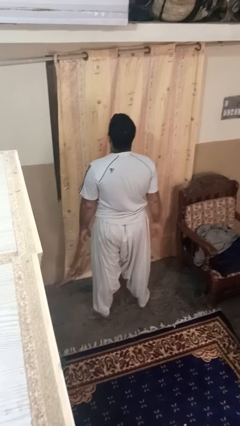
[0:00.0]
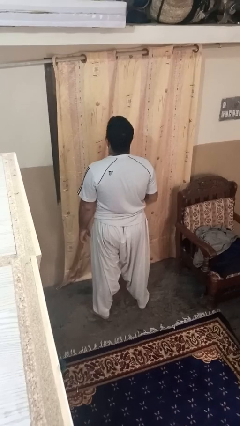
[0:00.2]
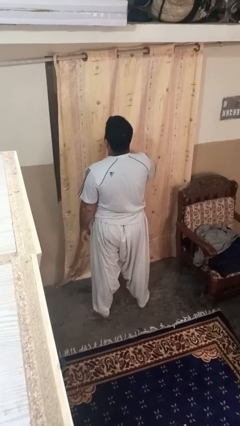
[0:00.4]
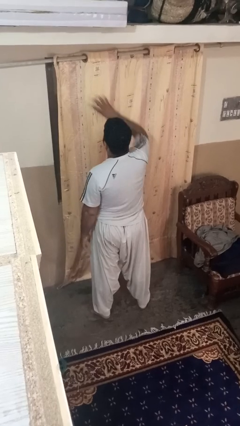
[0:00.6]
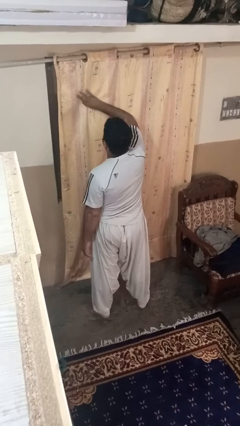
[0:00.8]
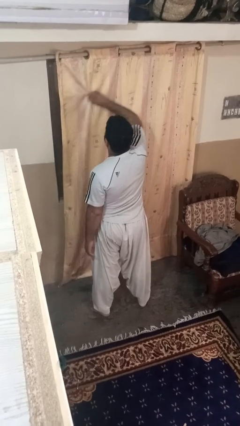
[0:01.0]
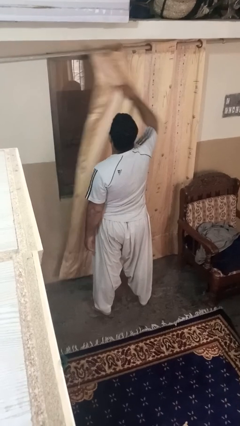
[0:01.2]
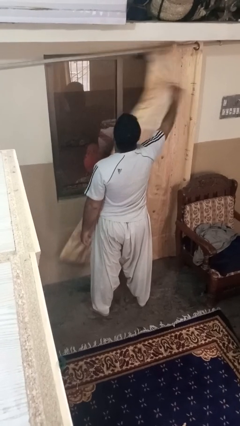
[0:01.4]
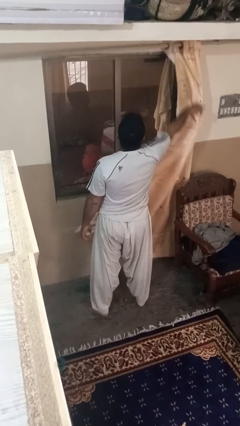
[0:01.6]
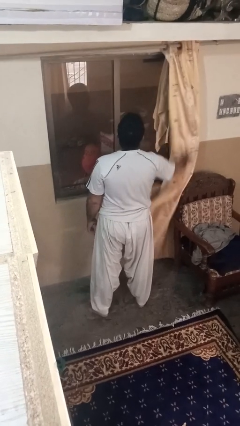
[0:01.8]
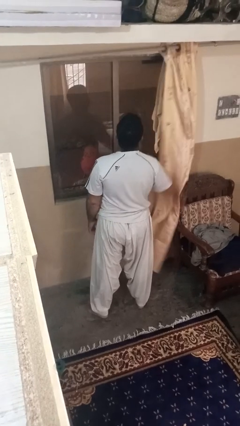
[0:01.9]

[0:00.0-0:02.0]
person opens curtains

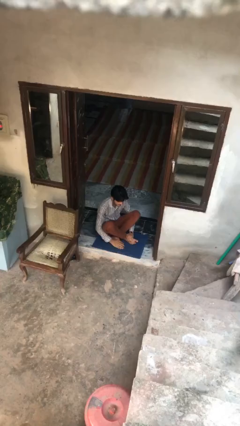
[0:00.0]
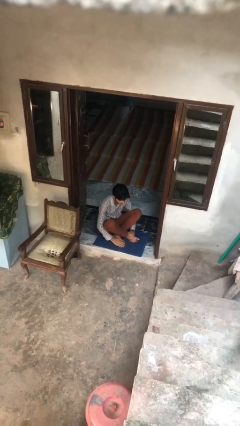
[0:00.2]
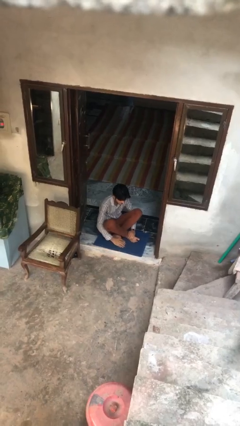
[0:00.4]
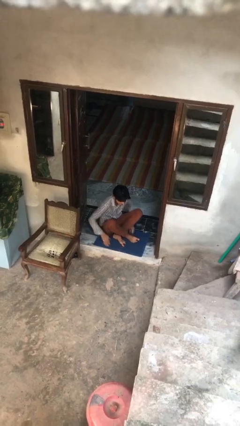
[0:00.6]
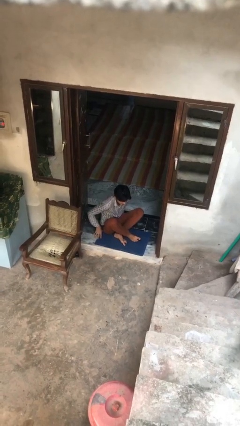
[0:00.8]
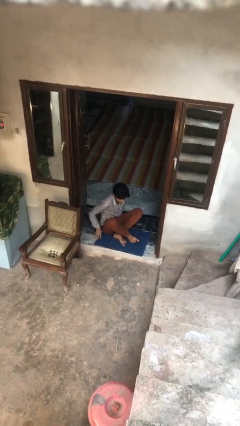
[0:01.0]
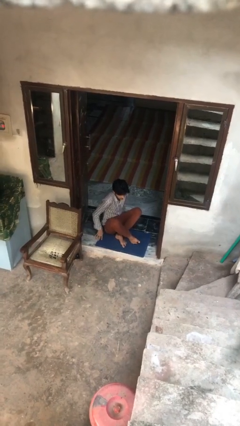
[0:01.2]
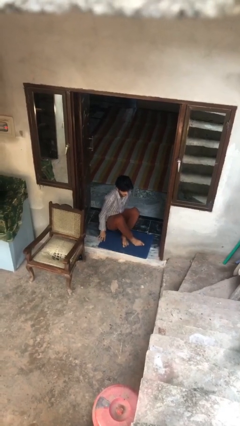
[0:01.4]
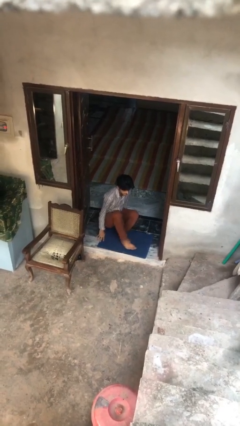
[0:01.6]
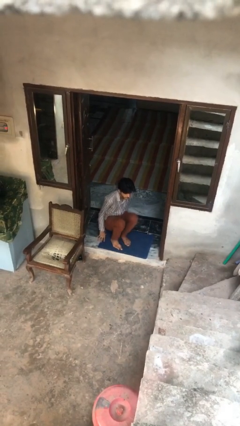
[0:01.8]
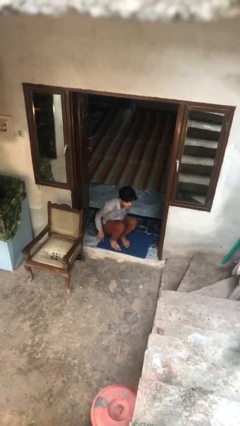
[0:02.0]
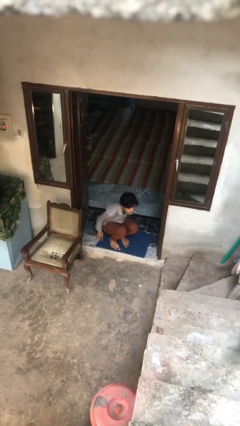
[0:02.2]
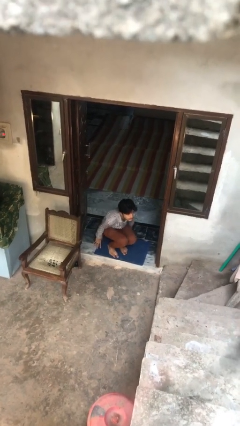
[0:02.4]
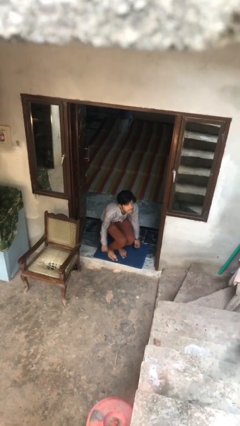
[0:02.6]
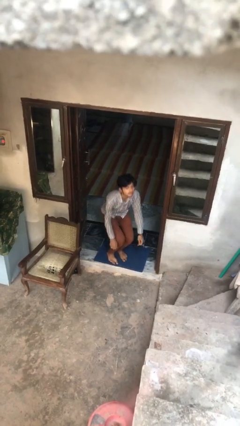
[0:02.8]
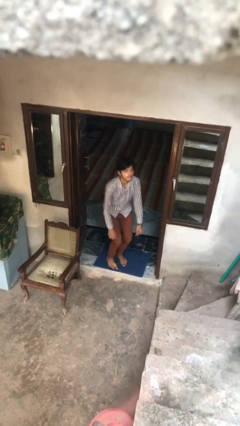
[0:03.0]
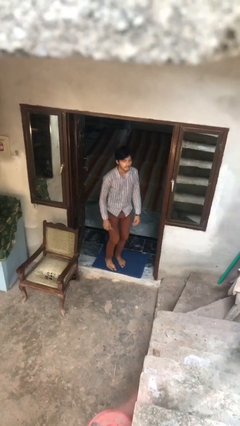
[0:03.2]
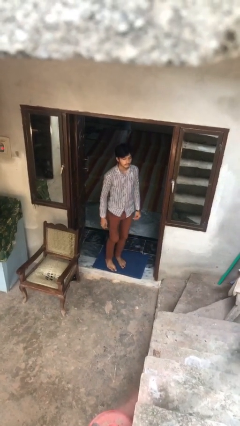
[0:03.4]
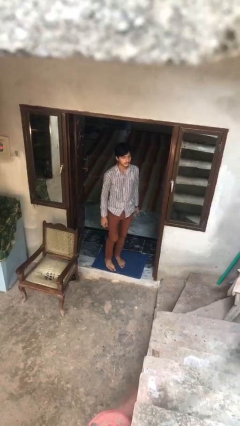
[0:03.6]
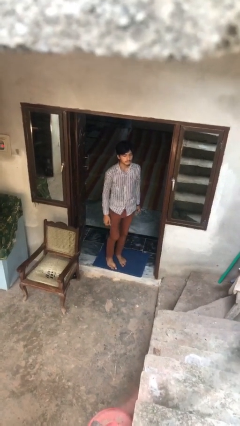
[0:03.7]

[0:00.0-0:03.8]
person stands up from floor

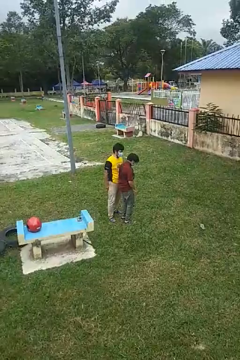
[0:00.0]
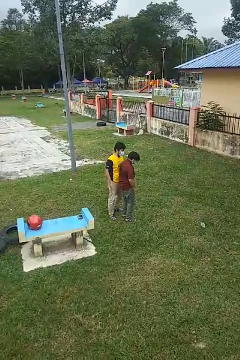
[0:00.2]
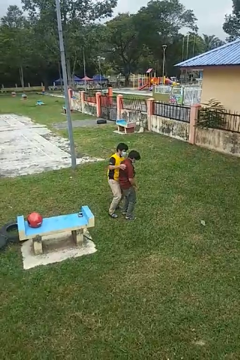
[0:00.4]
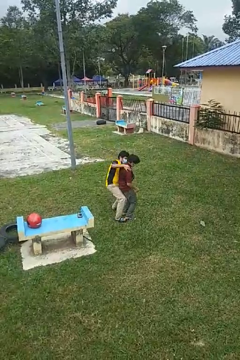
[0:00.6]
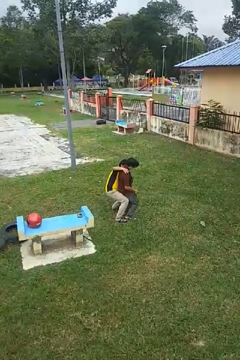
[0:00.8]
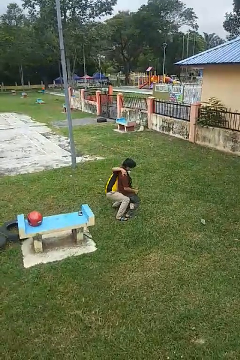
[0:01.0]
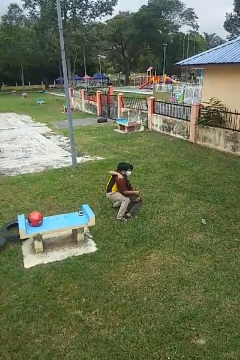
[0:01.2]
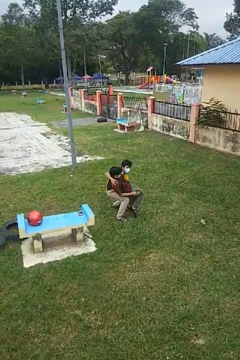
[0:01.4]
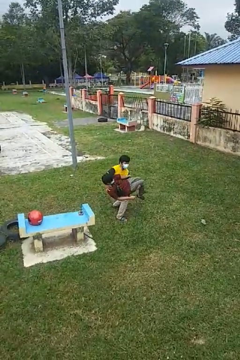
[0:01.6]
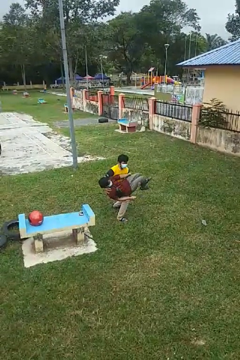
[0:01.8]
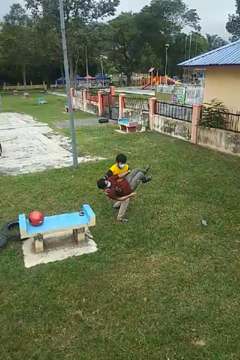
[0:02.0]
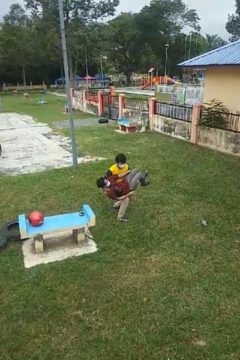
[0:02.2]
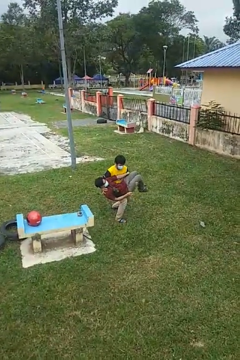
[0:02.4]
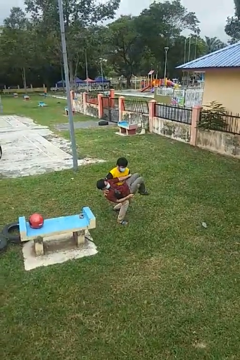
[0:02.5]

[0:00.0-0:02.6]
person picks up person

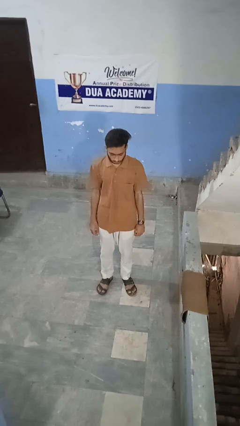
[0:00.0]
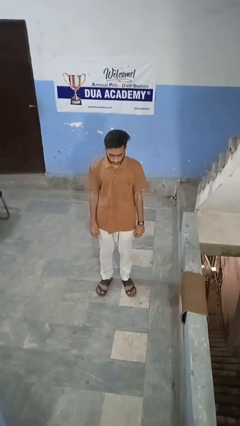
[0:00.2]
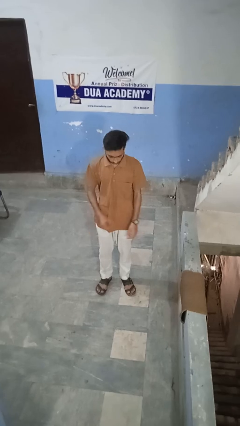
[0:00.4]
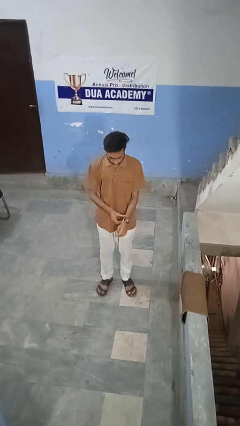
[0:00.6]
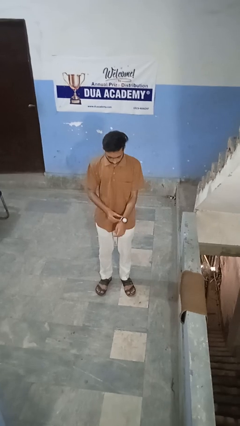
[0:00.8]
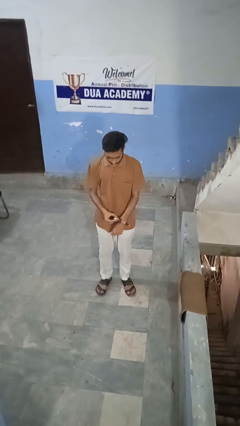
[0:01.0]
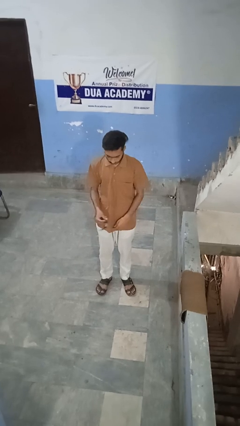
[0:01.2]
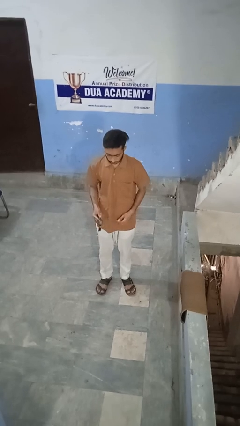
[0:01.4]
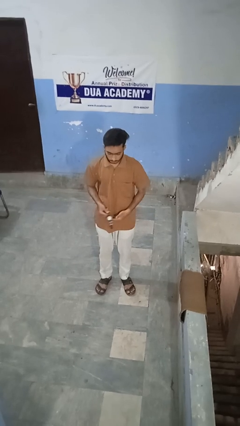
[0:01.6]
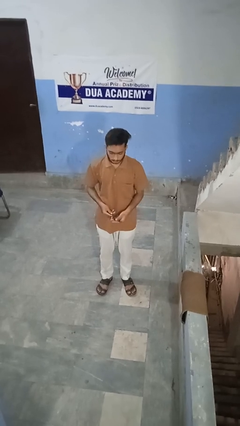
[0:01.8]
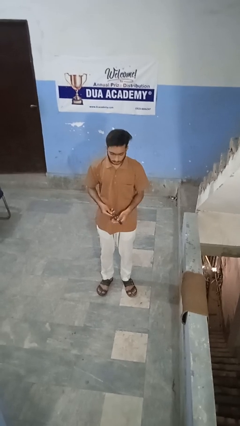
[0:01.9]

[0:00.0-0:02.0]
person takes off wristwatch

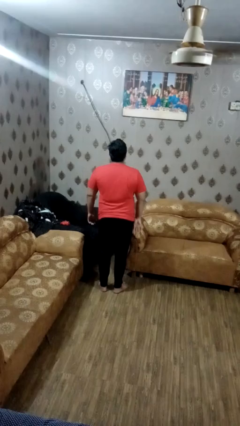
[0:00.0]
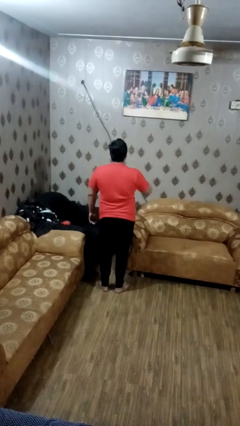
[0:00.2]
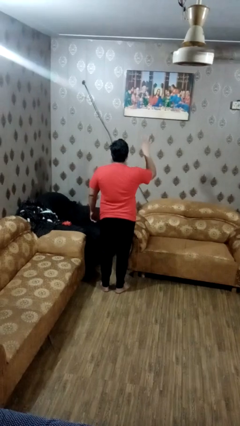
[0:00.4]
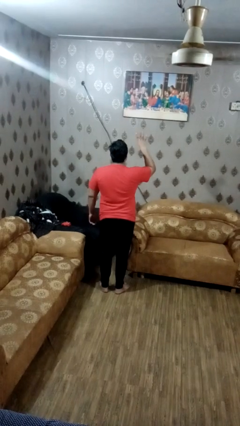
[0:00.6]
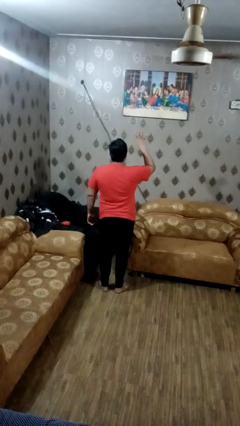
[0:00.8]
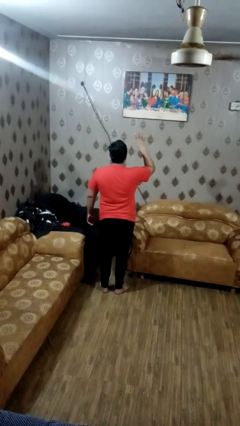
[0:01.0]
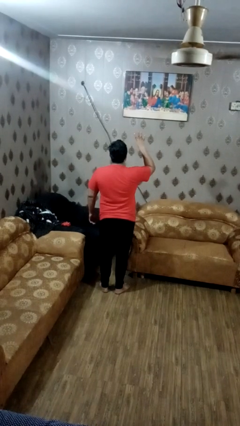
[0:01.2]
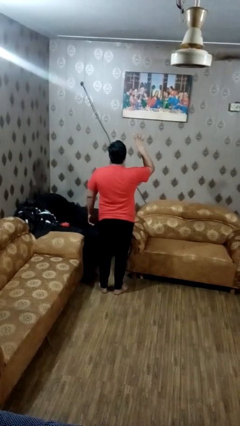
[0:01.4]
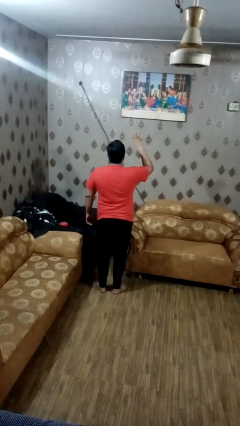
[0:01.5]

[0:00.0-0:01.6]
person gestures number four

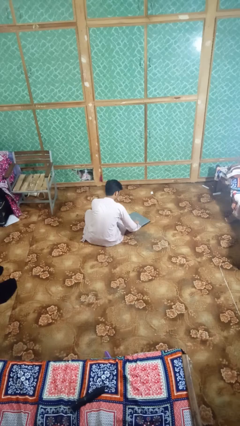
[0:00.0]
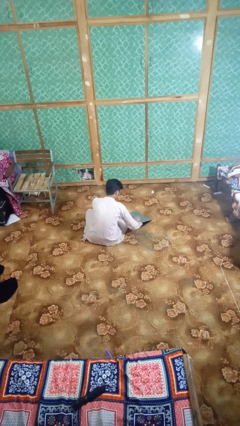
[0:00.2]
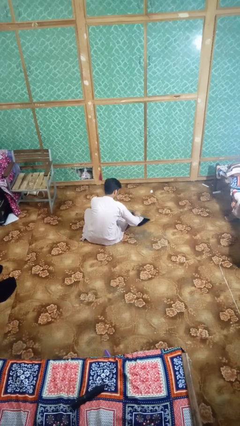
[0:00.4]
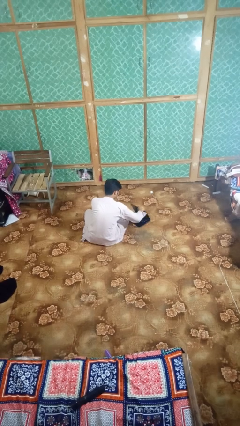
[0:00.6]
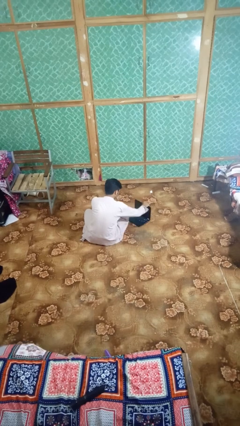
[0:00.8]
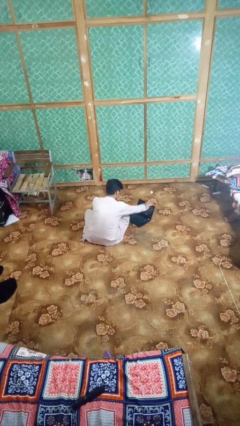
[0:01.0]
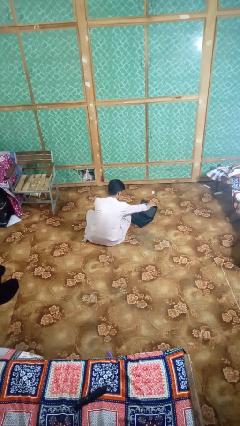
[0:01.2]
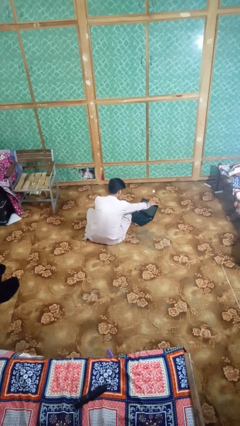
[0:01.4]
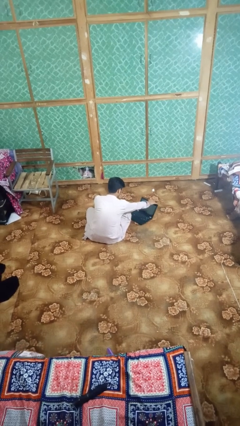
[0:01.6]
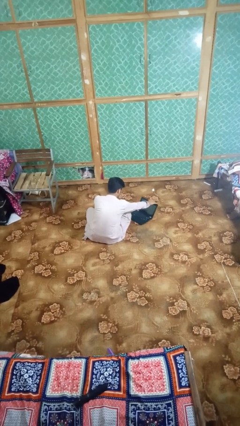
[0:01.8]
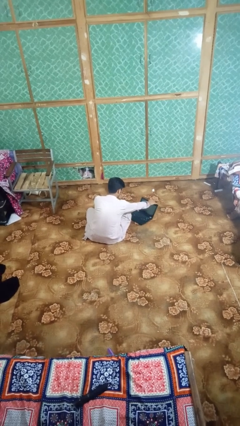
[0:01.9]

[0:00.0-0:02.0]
person opens laptop

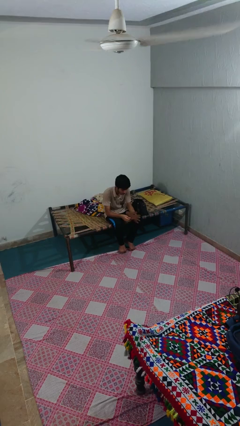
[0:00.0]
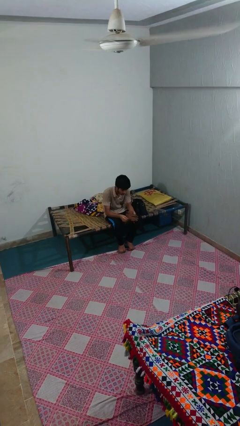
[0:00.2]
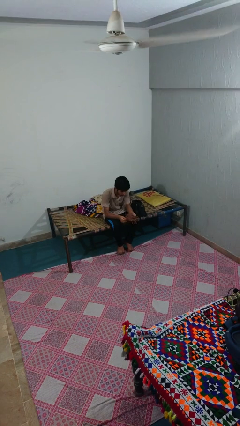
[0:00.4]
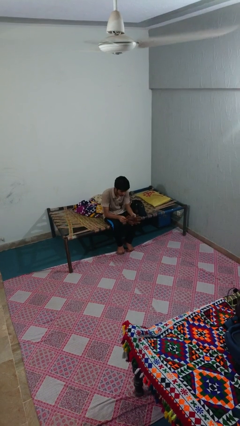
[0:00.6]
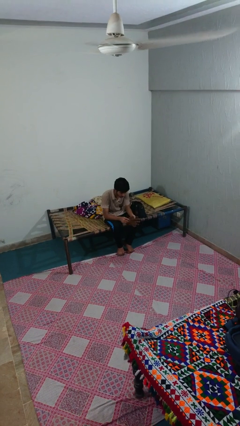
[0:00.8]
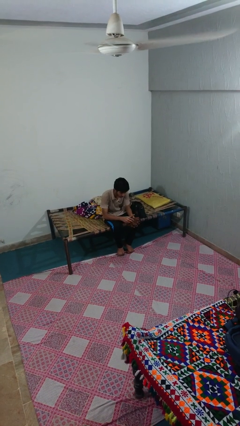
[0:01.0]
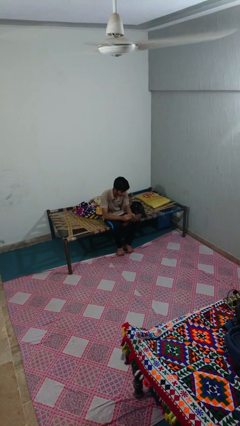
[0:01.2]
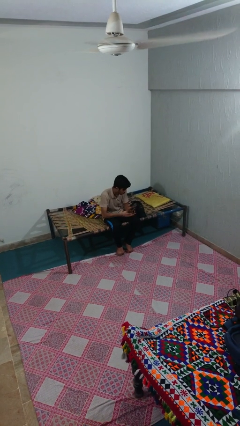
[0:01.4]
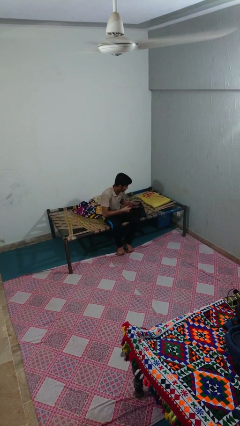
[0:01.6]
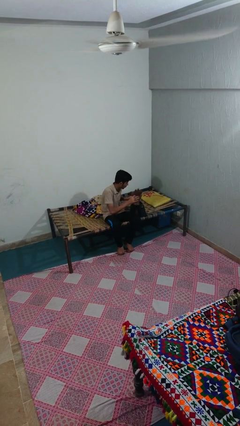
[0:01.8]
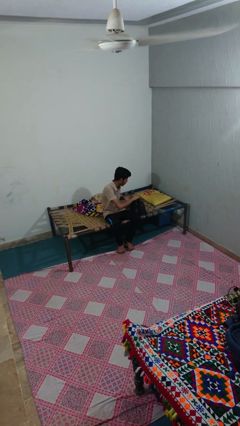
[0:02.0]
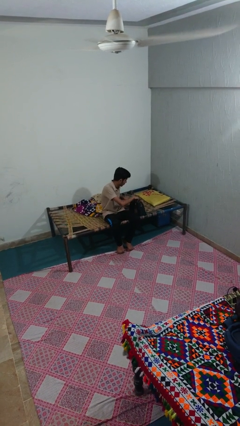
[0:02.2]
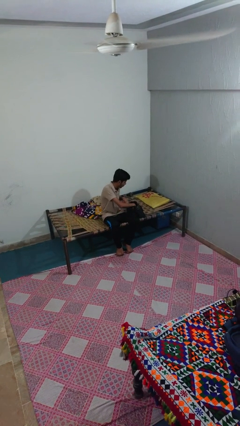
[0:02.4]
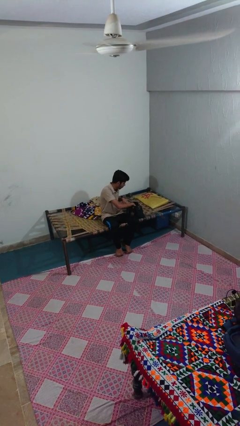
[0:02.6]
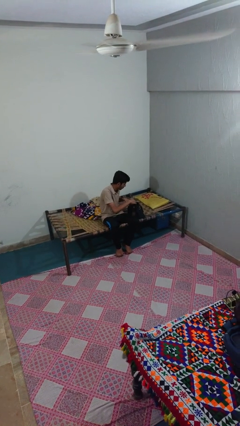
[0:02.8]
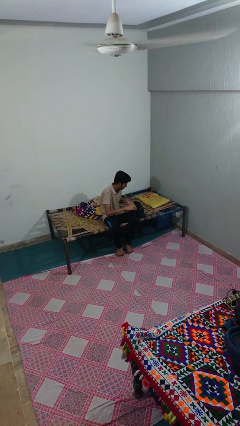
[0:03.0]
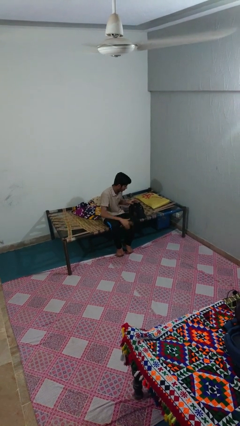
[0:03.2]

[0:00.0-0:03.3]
person puts object into purse
